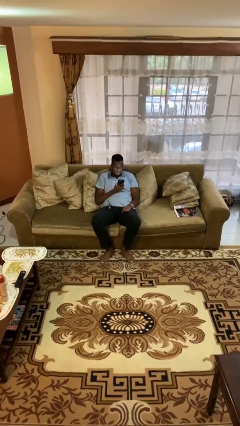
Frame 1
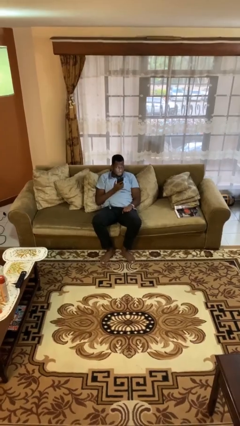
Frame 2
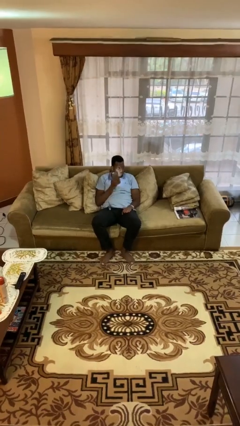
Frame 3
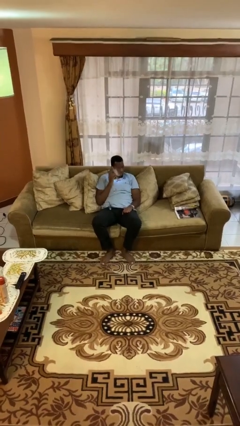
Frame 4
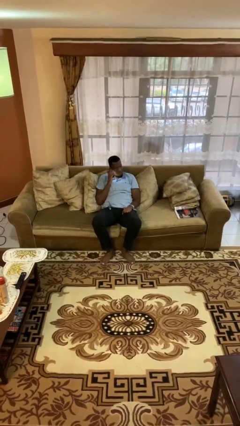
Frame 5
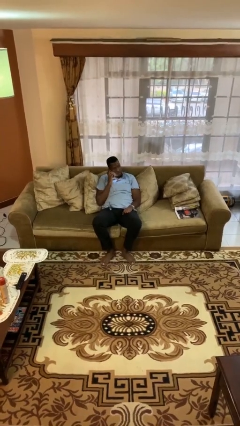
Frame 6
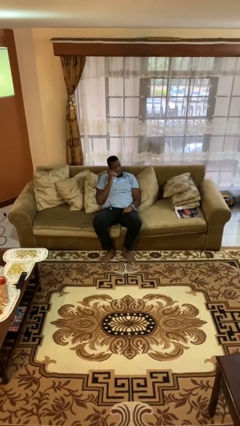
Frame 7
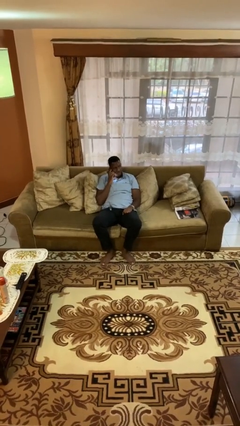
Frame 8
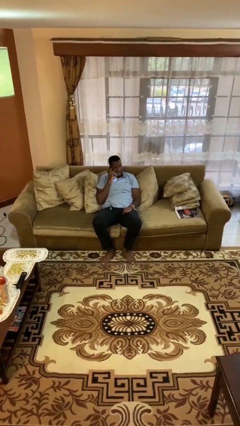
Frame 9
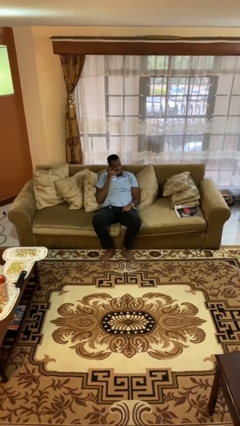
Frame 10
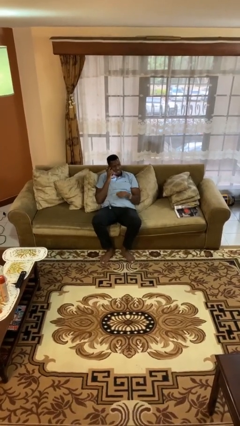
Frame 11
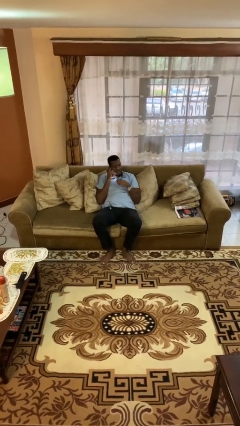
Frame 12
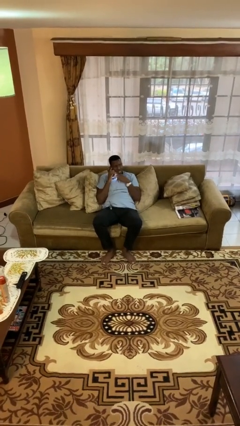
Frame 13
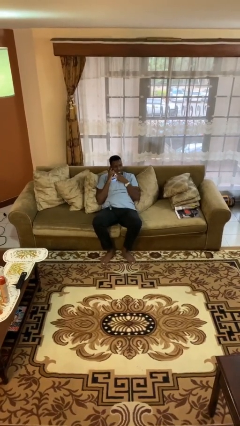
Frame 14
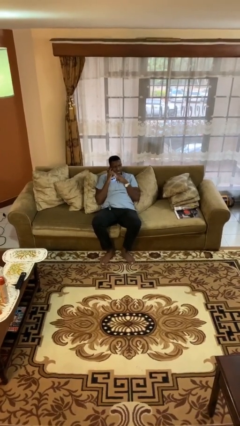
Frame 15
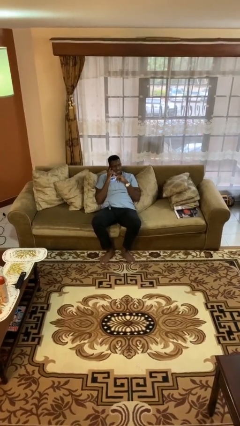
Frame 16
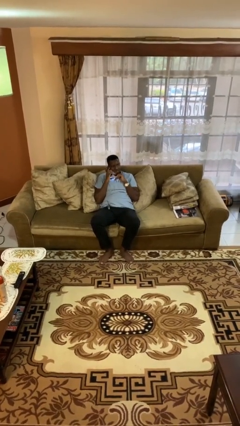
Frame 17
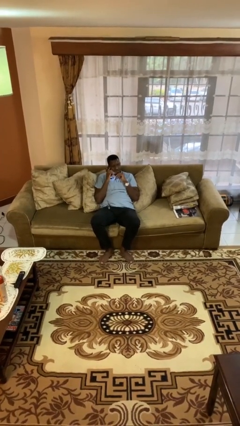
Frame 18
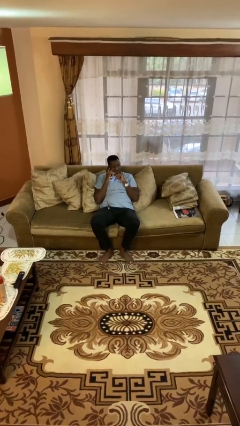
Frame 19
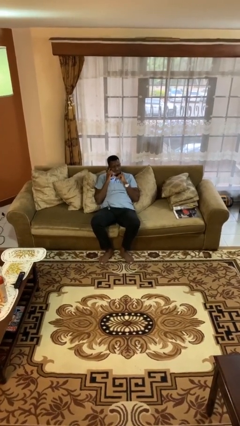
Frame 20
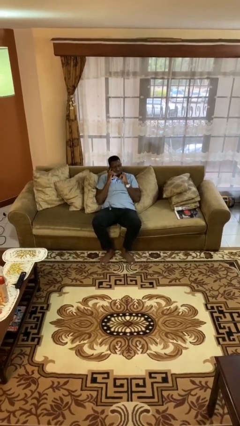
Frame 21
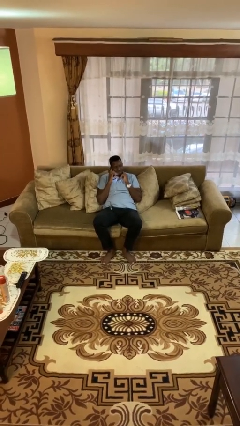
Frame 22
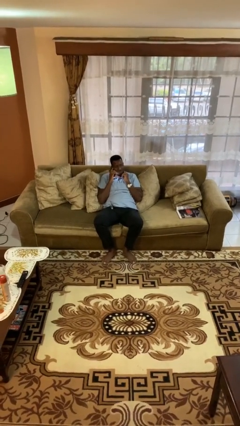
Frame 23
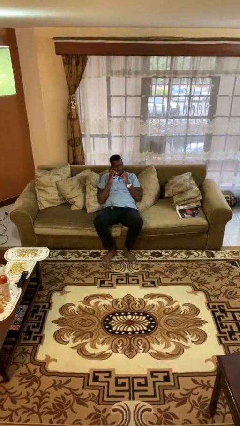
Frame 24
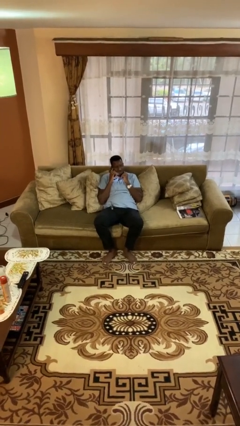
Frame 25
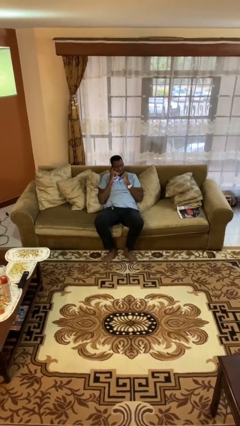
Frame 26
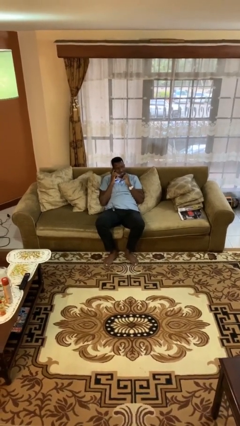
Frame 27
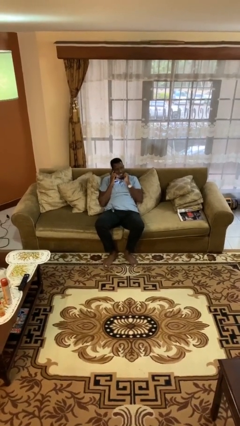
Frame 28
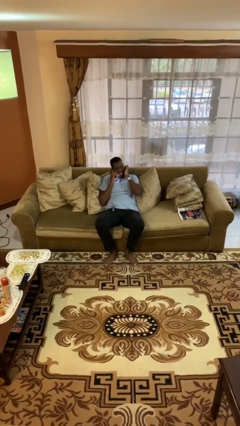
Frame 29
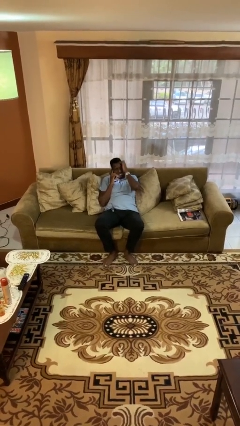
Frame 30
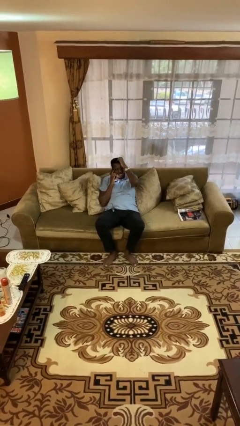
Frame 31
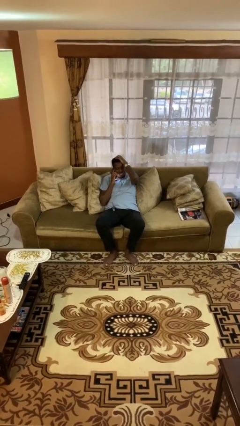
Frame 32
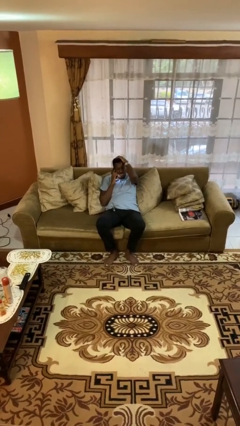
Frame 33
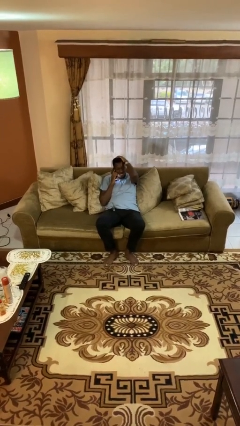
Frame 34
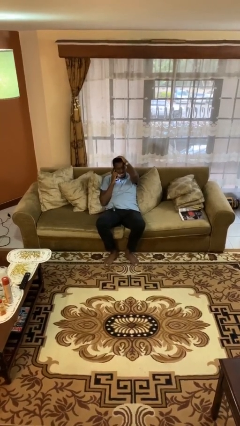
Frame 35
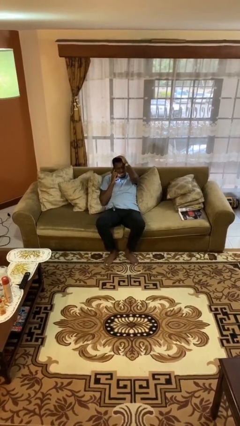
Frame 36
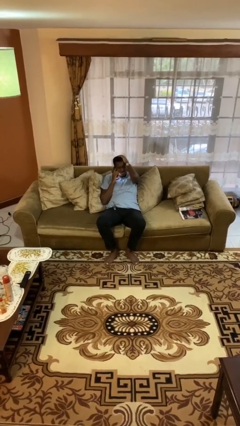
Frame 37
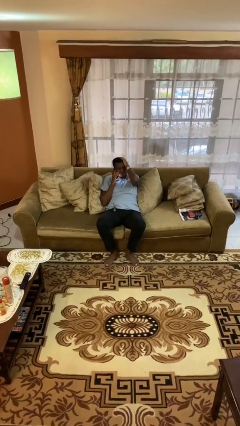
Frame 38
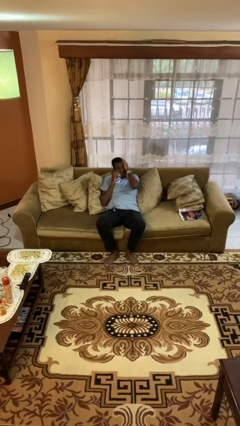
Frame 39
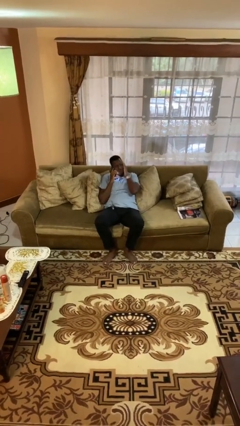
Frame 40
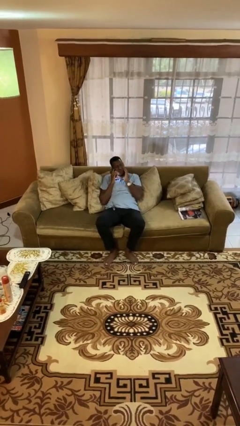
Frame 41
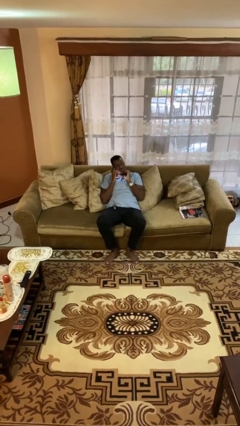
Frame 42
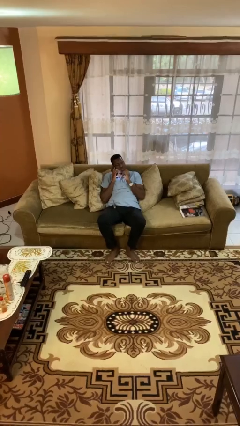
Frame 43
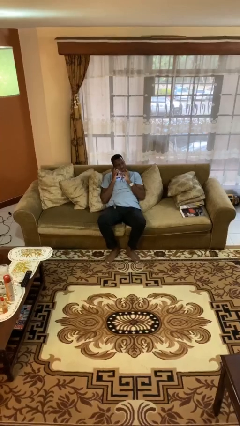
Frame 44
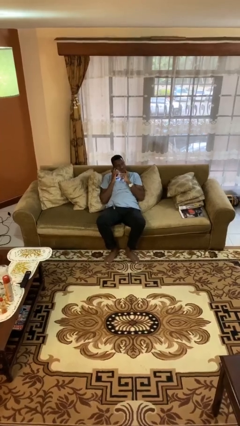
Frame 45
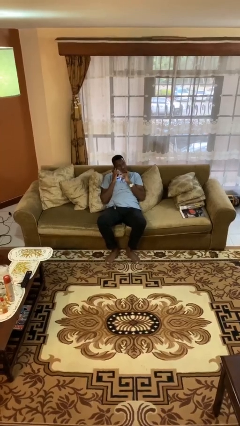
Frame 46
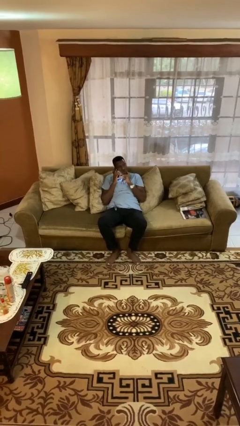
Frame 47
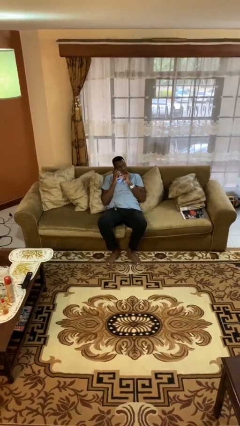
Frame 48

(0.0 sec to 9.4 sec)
person talks on phone

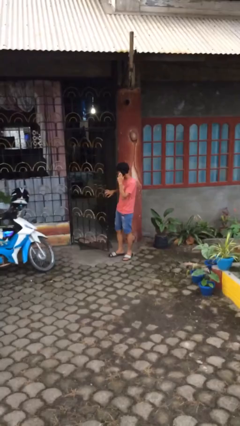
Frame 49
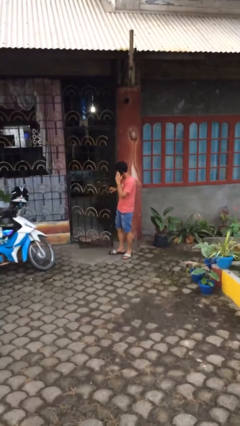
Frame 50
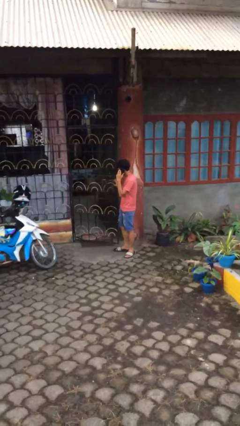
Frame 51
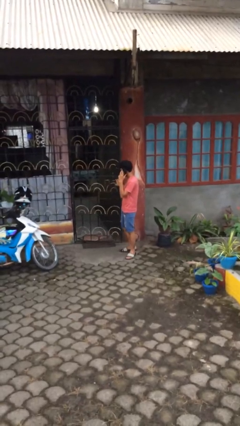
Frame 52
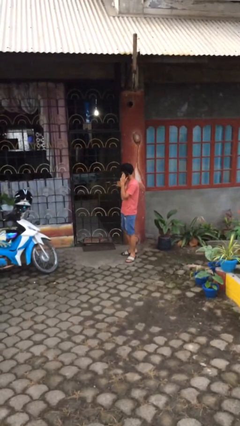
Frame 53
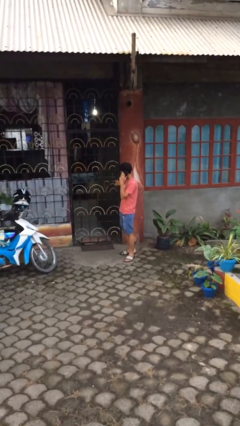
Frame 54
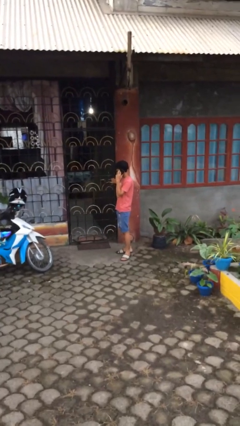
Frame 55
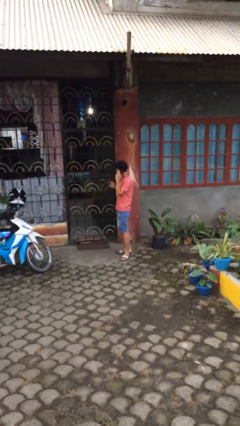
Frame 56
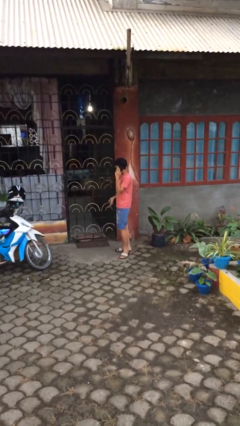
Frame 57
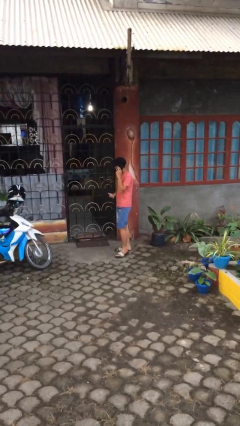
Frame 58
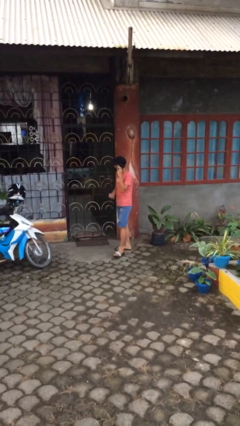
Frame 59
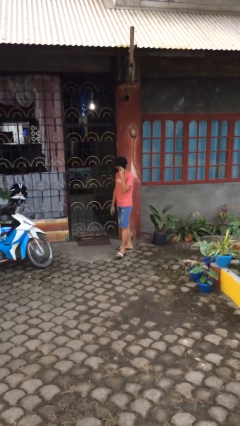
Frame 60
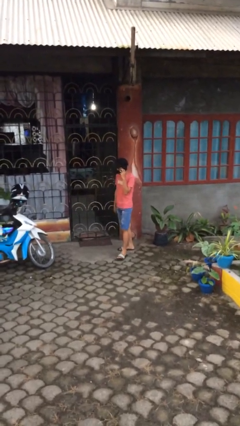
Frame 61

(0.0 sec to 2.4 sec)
person closes facility door

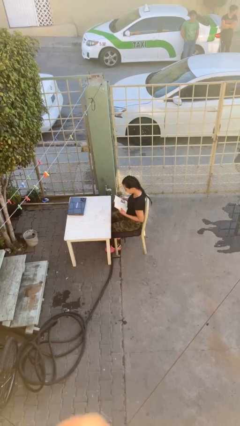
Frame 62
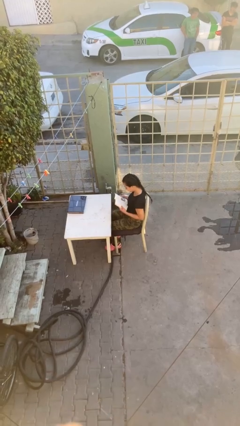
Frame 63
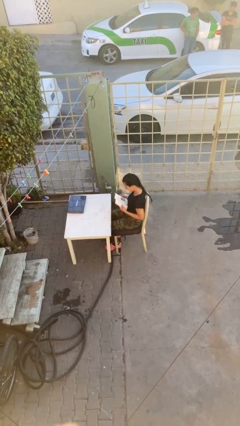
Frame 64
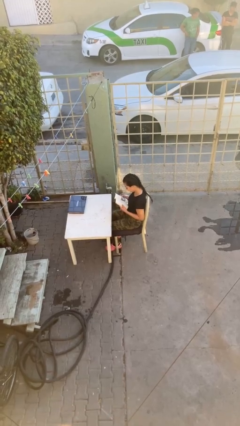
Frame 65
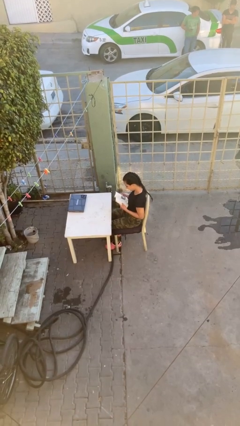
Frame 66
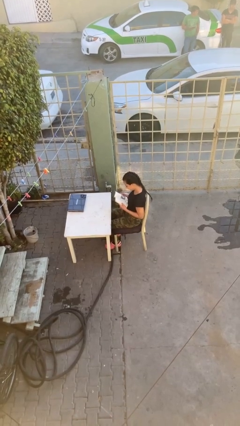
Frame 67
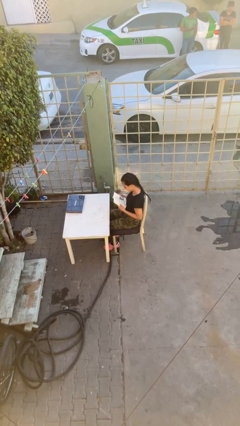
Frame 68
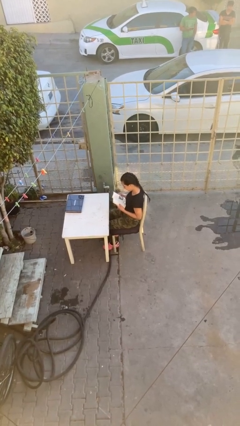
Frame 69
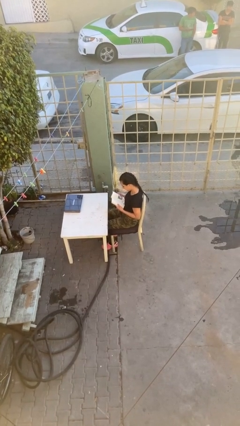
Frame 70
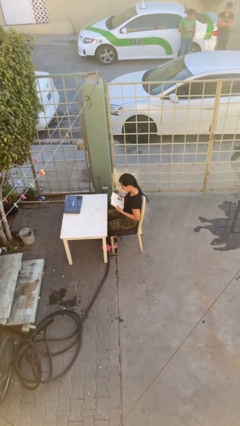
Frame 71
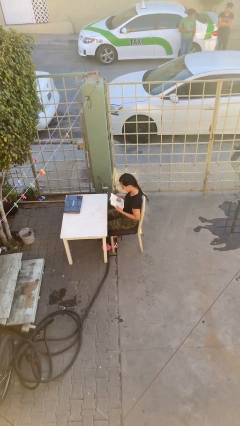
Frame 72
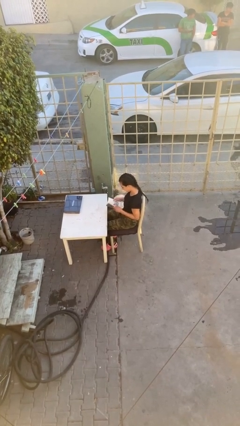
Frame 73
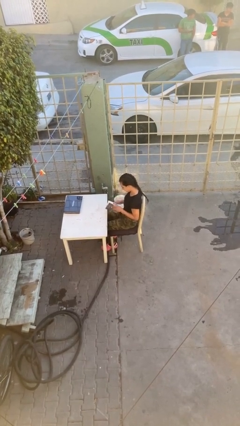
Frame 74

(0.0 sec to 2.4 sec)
person reads document

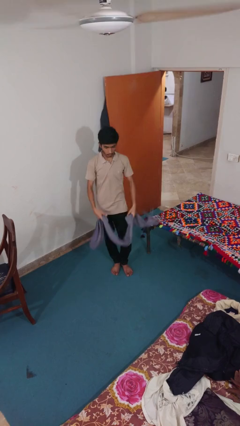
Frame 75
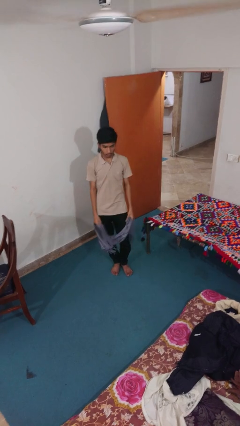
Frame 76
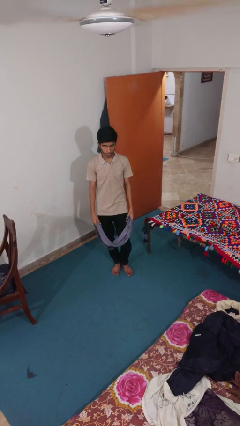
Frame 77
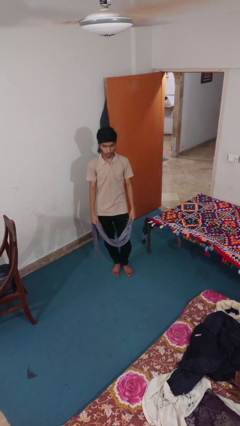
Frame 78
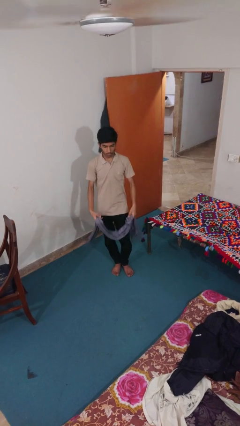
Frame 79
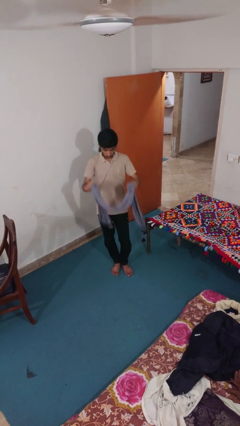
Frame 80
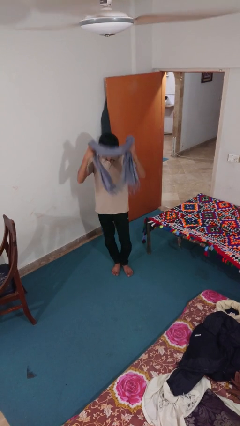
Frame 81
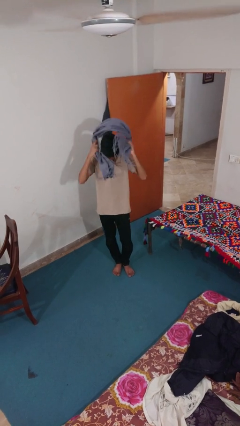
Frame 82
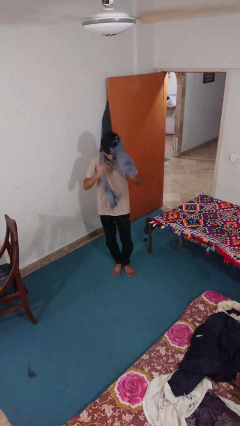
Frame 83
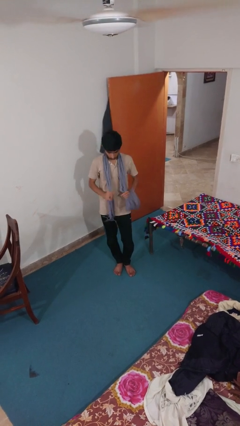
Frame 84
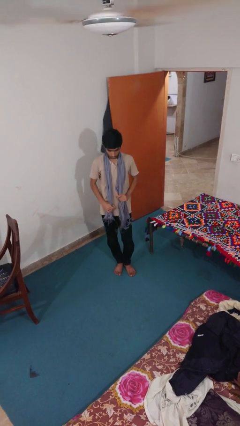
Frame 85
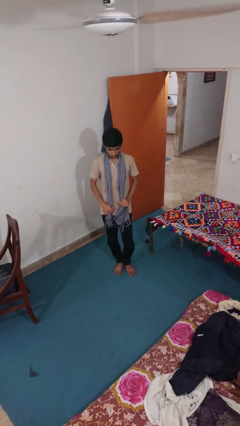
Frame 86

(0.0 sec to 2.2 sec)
person puts on scarf

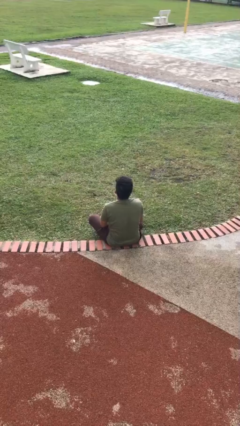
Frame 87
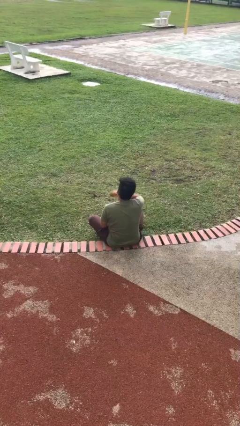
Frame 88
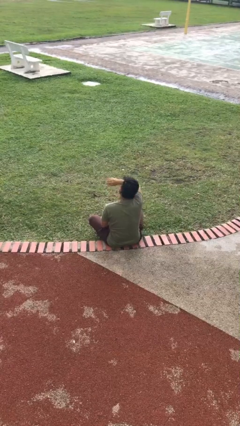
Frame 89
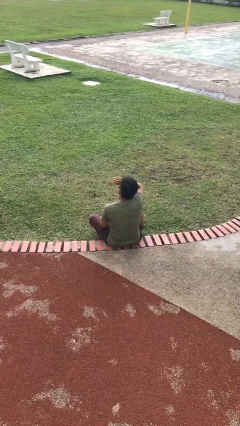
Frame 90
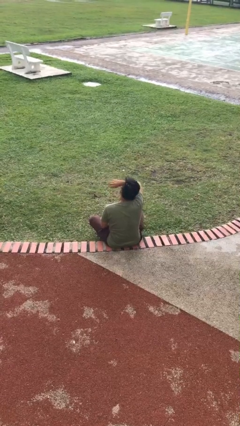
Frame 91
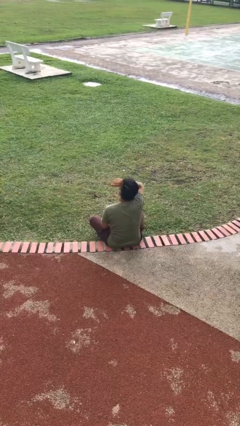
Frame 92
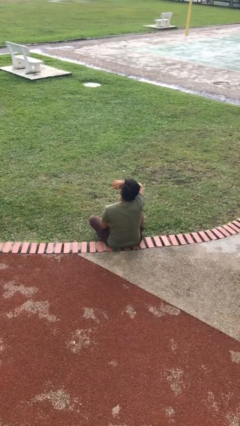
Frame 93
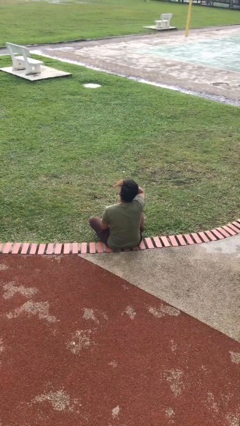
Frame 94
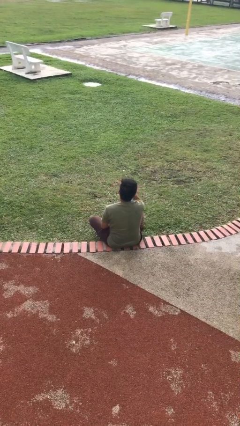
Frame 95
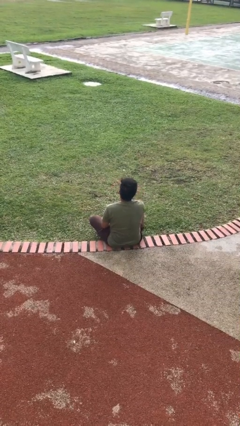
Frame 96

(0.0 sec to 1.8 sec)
person rubs eyes
